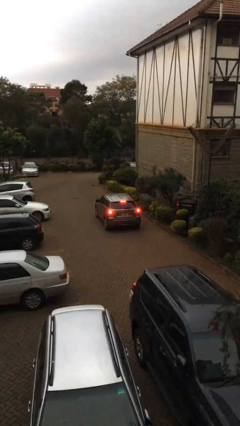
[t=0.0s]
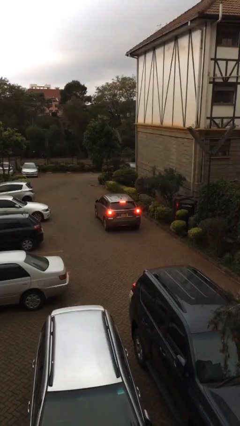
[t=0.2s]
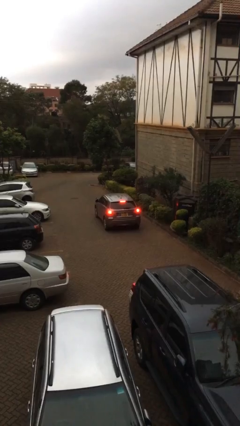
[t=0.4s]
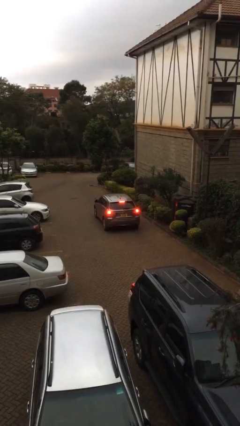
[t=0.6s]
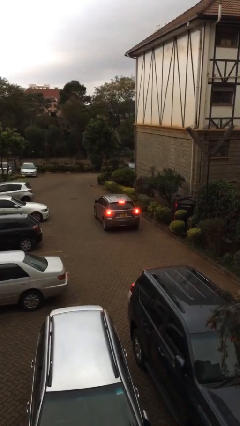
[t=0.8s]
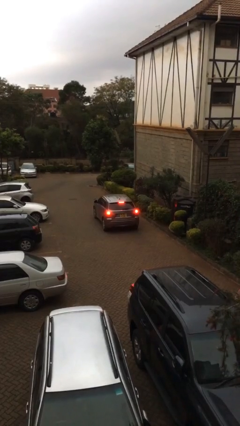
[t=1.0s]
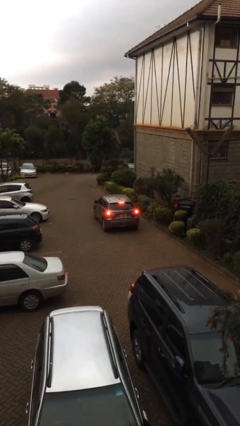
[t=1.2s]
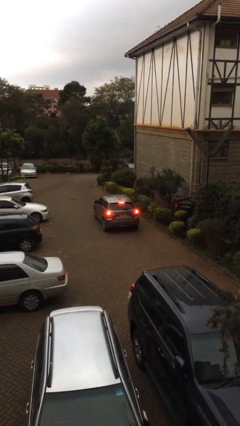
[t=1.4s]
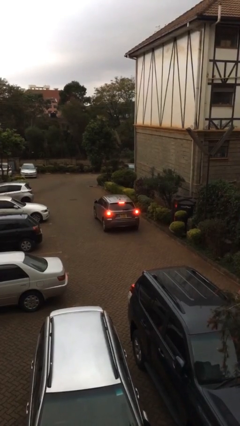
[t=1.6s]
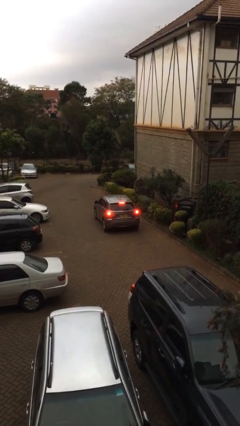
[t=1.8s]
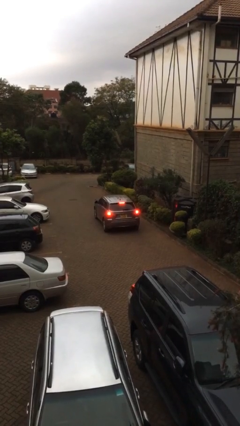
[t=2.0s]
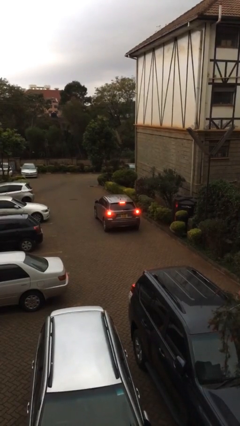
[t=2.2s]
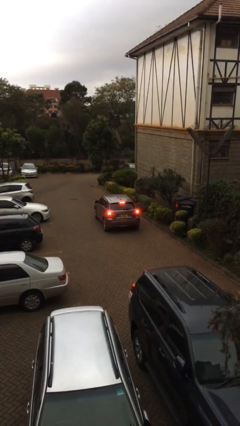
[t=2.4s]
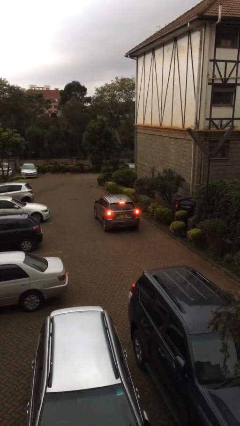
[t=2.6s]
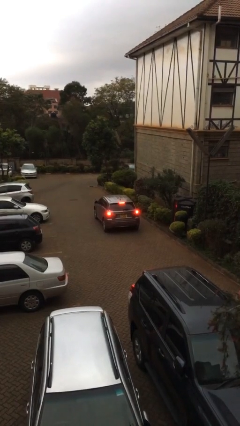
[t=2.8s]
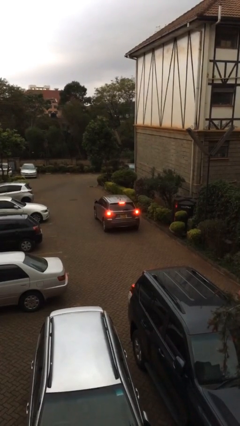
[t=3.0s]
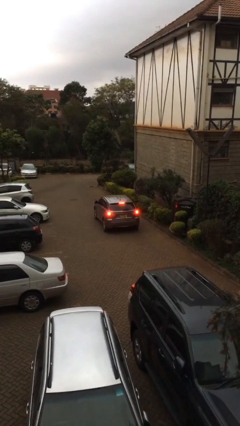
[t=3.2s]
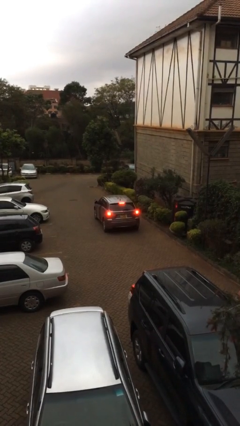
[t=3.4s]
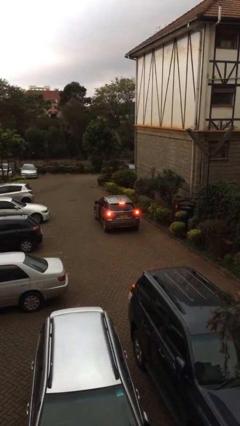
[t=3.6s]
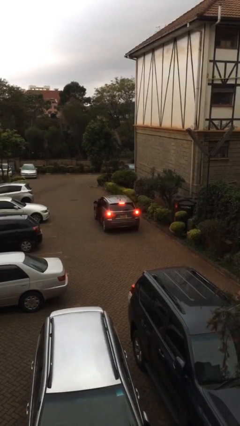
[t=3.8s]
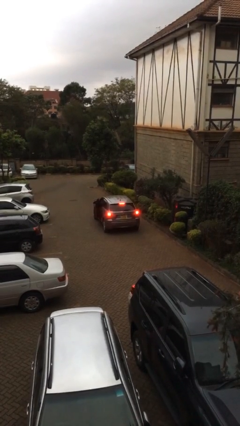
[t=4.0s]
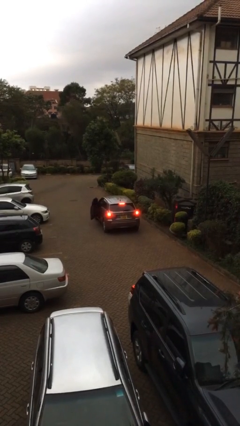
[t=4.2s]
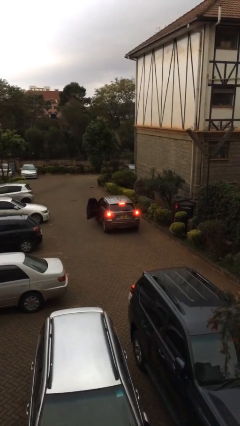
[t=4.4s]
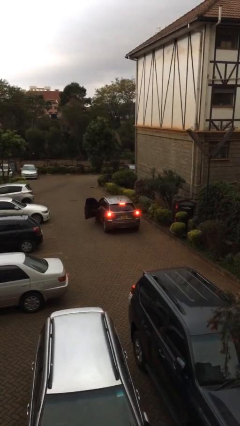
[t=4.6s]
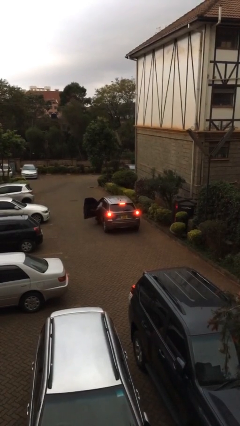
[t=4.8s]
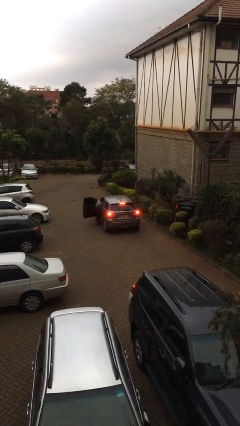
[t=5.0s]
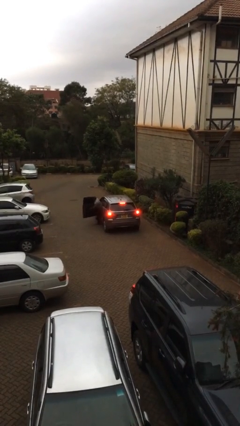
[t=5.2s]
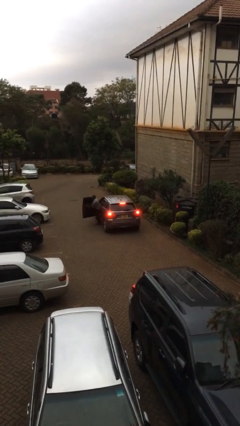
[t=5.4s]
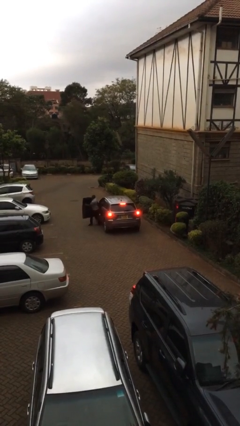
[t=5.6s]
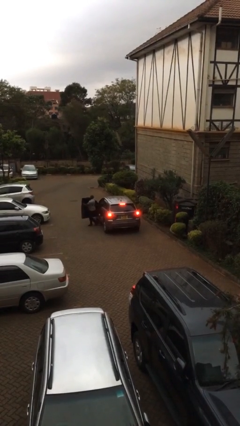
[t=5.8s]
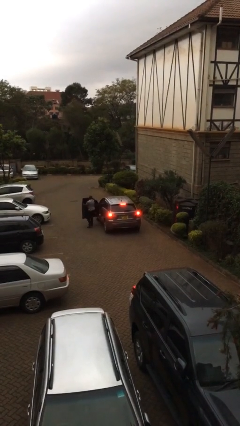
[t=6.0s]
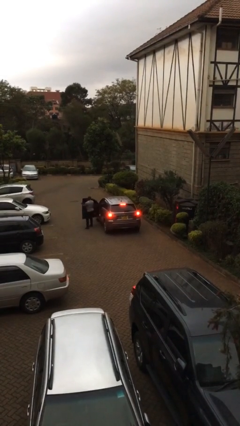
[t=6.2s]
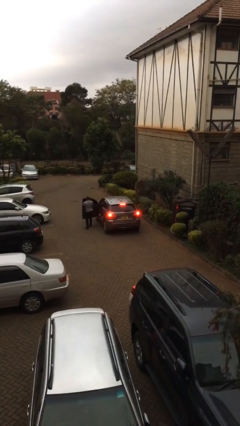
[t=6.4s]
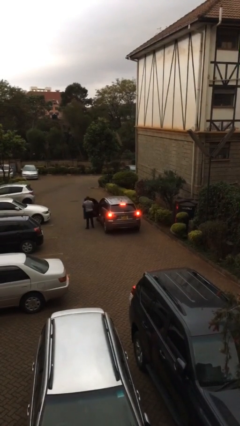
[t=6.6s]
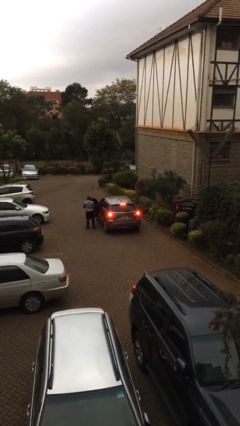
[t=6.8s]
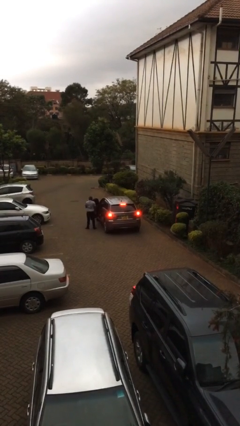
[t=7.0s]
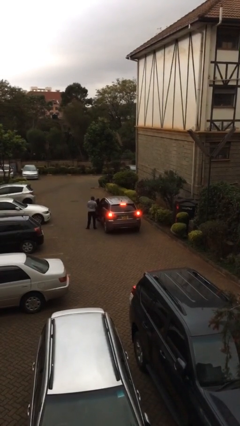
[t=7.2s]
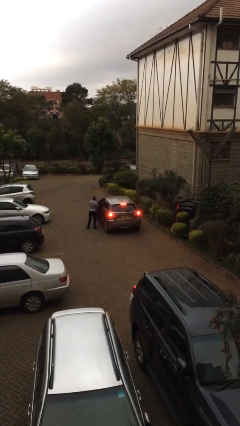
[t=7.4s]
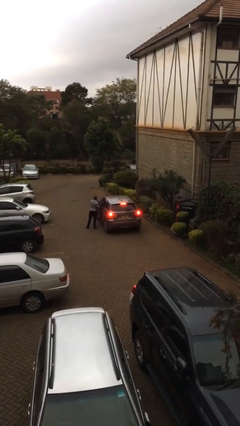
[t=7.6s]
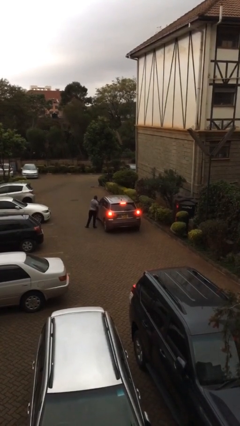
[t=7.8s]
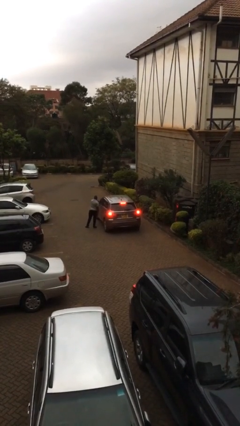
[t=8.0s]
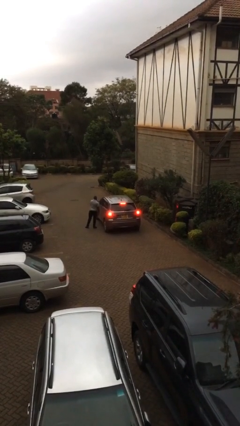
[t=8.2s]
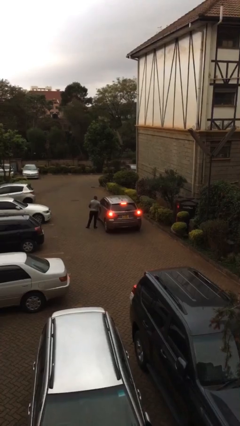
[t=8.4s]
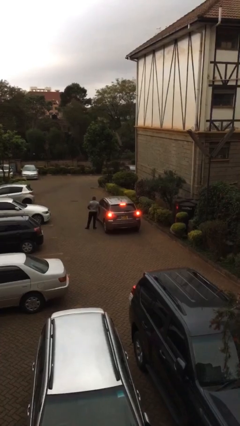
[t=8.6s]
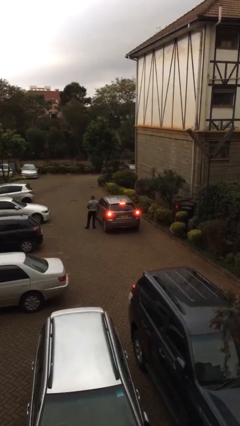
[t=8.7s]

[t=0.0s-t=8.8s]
car drops off person

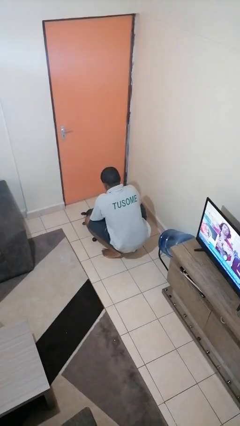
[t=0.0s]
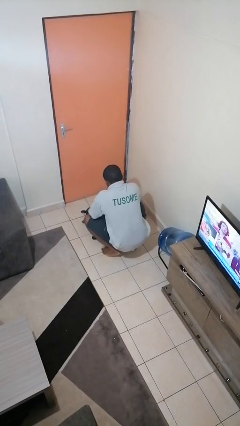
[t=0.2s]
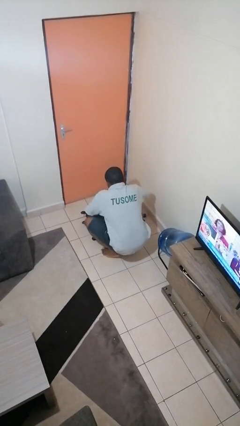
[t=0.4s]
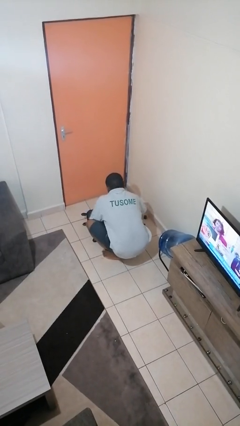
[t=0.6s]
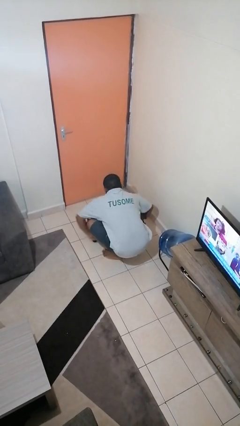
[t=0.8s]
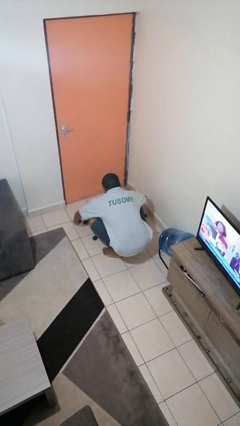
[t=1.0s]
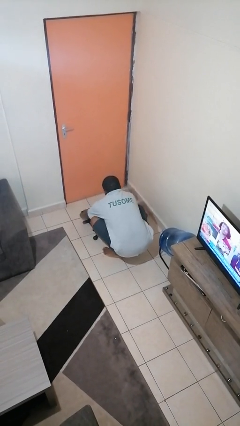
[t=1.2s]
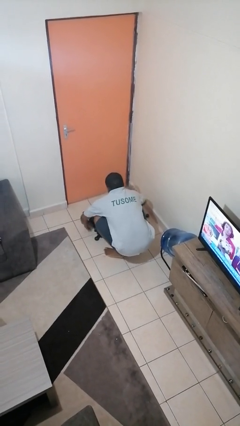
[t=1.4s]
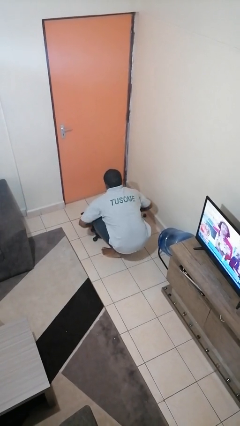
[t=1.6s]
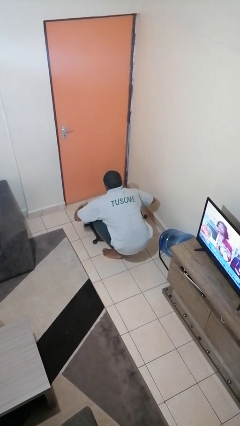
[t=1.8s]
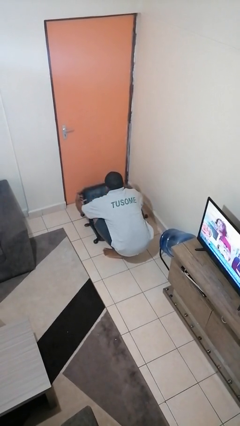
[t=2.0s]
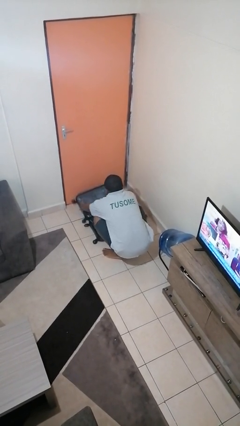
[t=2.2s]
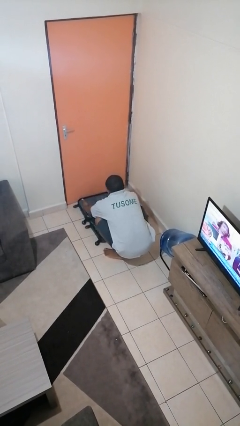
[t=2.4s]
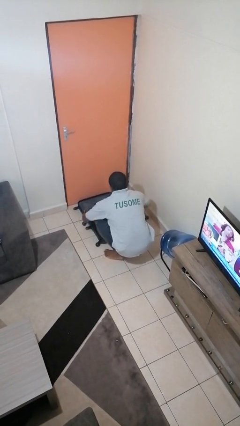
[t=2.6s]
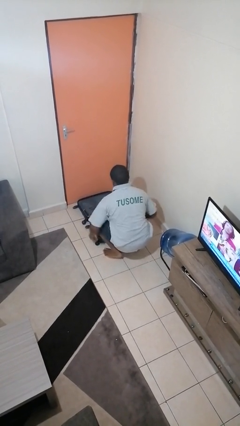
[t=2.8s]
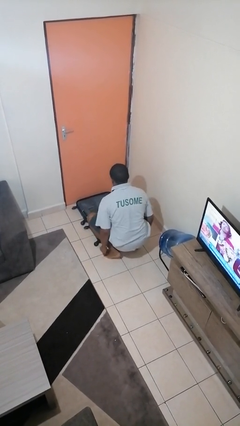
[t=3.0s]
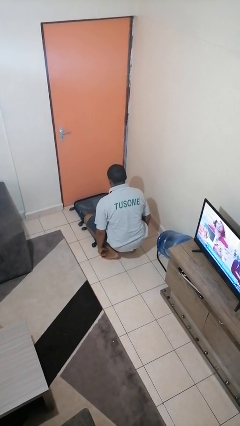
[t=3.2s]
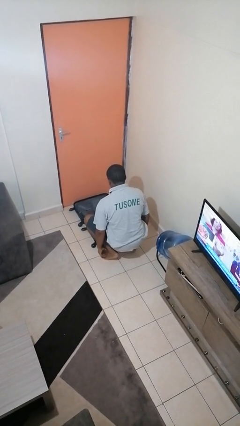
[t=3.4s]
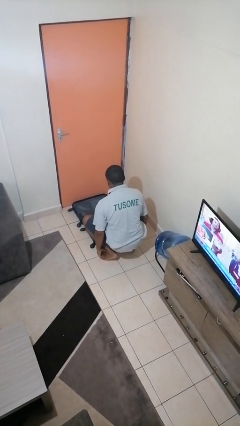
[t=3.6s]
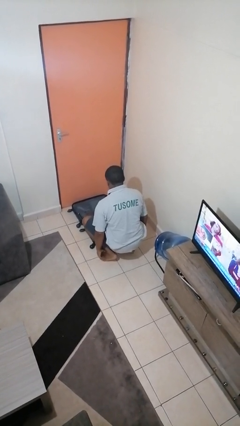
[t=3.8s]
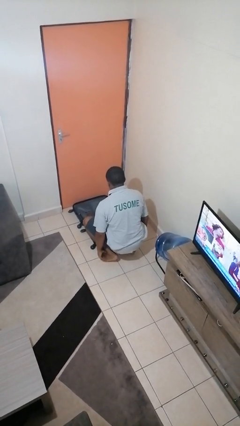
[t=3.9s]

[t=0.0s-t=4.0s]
person opens suitcase

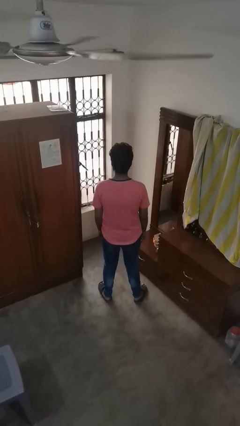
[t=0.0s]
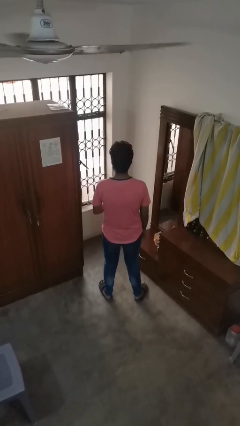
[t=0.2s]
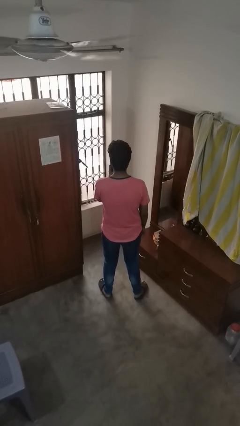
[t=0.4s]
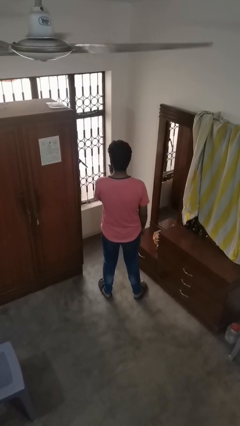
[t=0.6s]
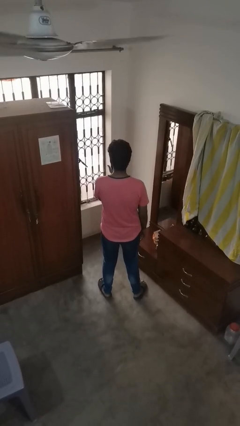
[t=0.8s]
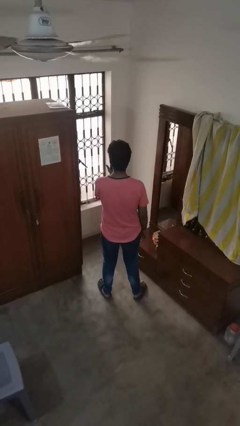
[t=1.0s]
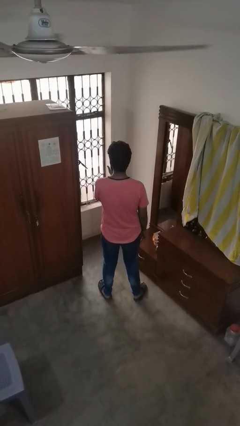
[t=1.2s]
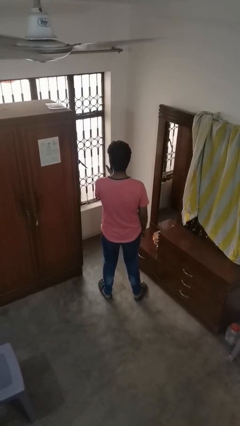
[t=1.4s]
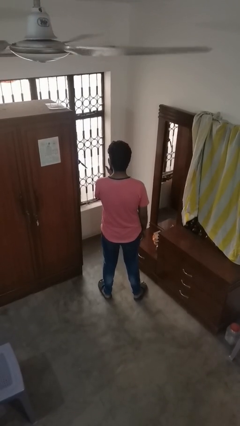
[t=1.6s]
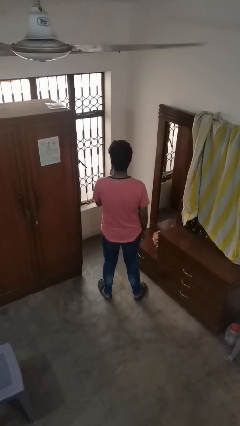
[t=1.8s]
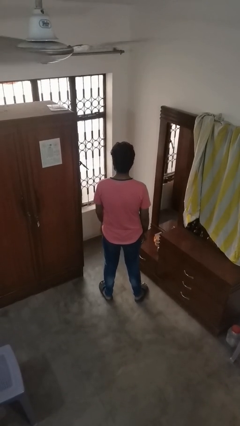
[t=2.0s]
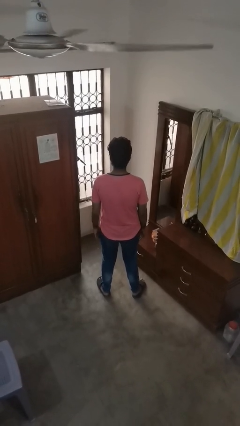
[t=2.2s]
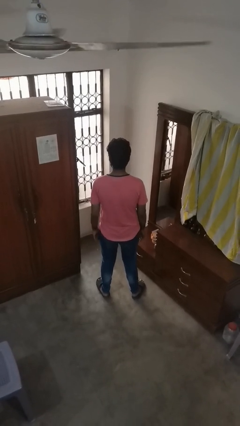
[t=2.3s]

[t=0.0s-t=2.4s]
person licks fingers

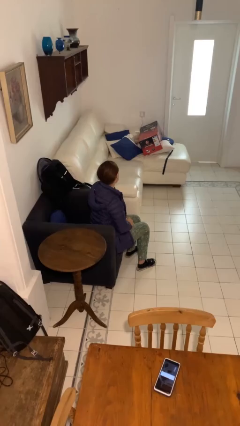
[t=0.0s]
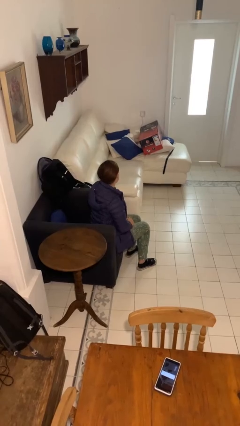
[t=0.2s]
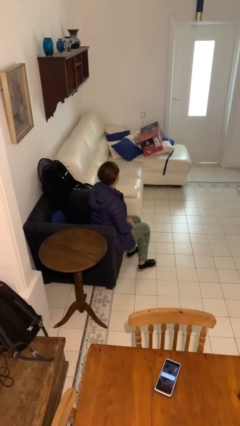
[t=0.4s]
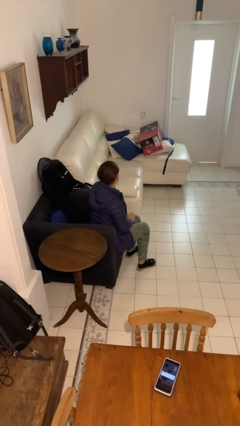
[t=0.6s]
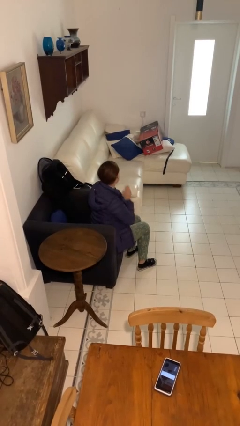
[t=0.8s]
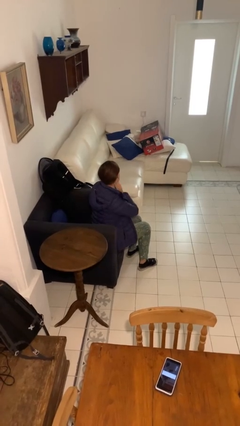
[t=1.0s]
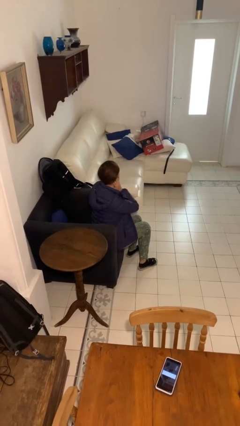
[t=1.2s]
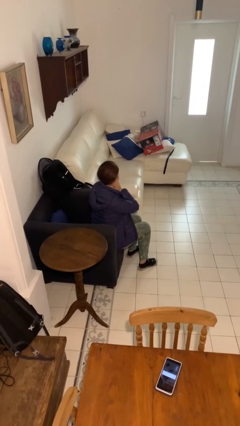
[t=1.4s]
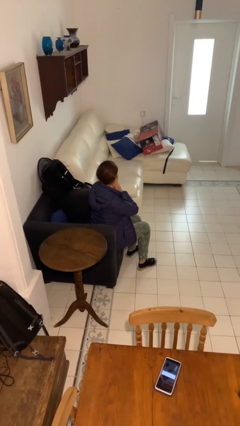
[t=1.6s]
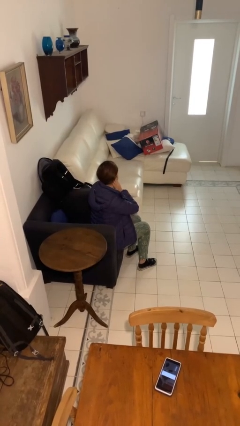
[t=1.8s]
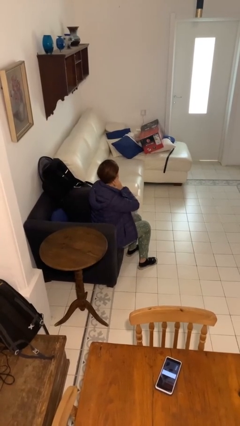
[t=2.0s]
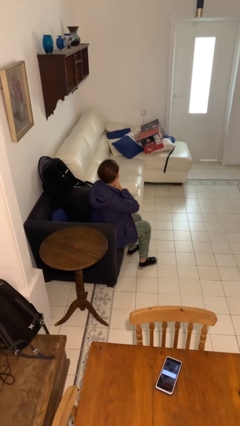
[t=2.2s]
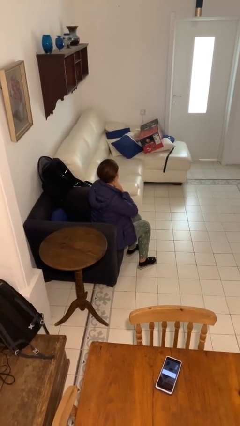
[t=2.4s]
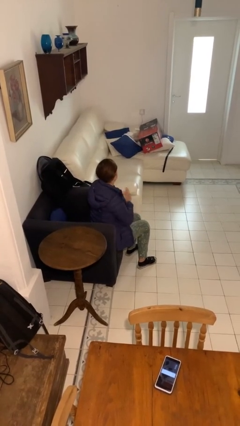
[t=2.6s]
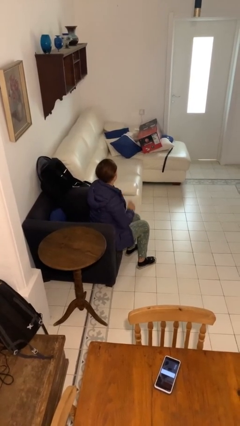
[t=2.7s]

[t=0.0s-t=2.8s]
person rubs neck
